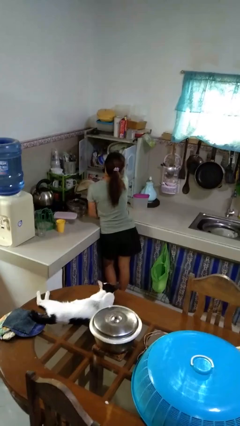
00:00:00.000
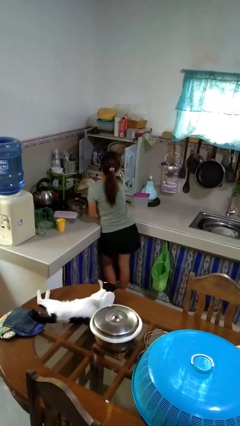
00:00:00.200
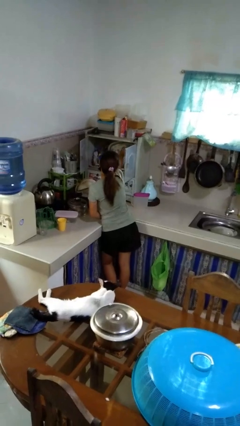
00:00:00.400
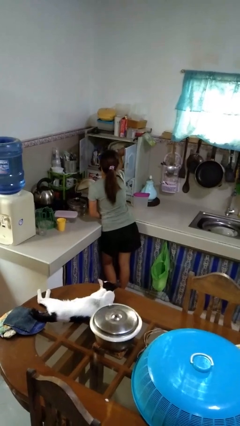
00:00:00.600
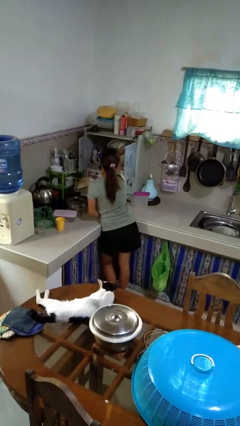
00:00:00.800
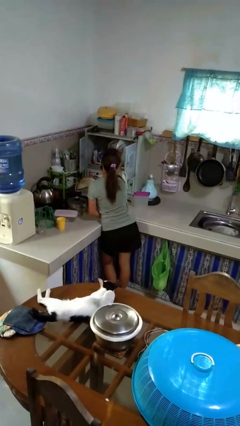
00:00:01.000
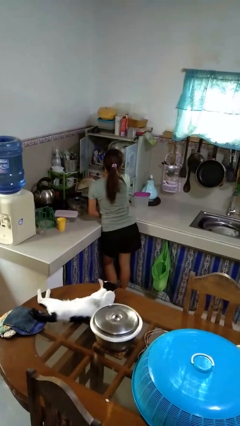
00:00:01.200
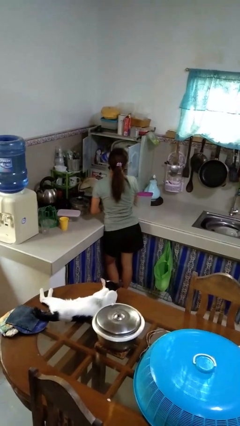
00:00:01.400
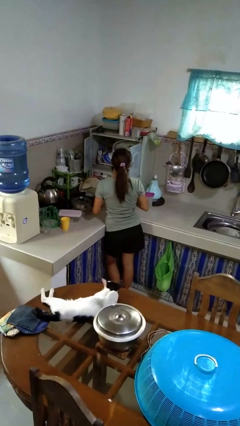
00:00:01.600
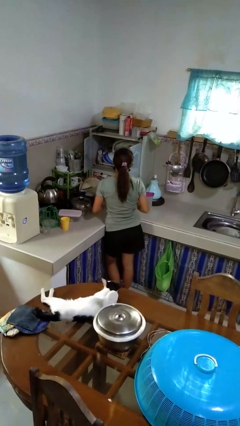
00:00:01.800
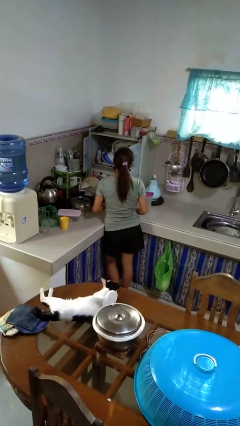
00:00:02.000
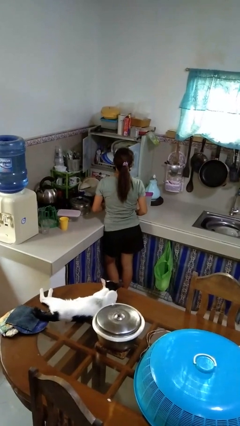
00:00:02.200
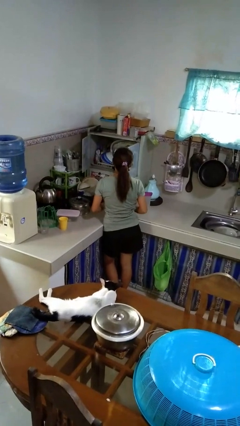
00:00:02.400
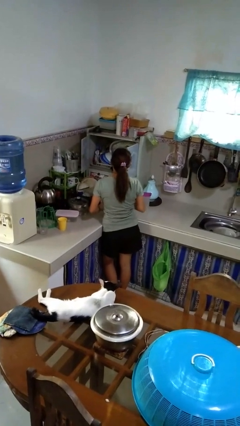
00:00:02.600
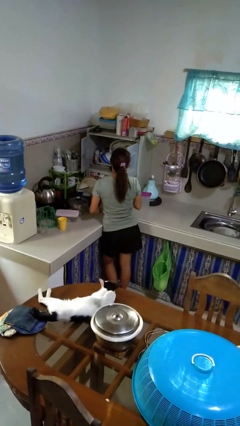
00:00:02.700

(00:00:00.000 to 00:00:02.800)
person takes object from kitchen drawer

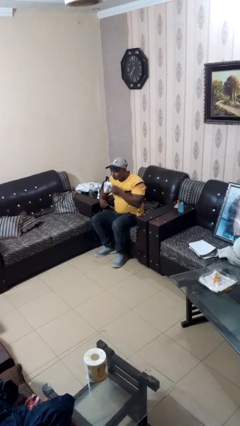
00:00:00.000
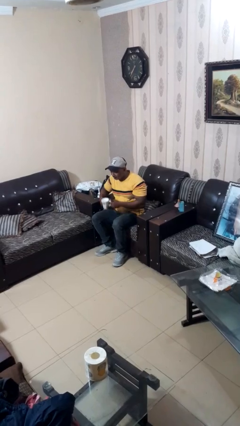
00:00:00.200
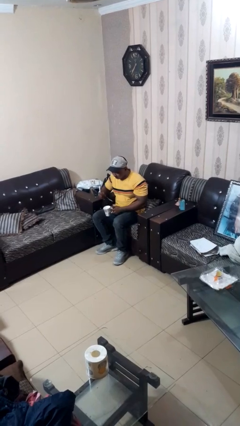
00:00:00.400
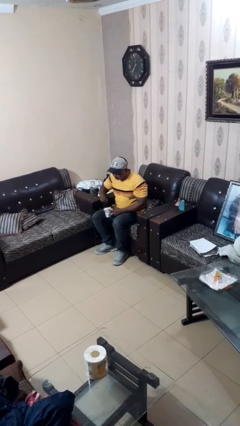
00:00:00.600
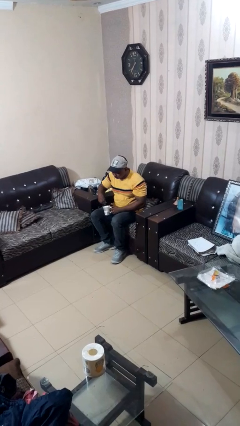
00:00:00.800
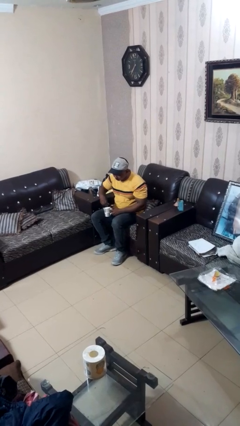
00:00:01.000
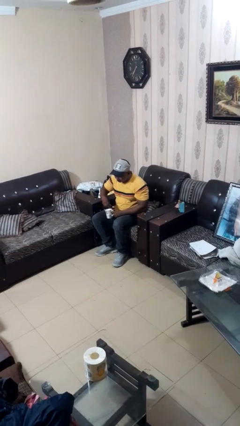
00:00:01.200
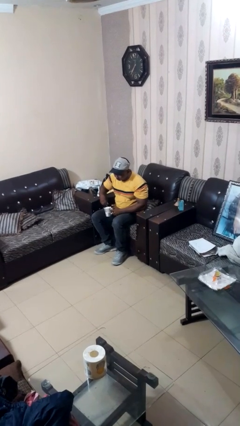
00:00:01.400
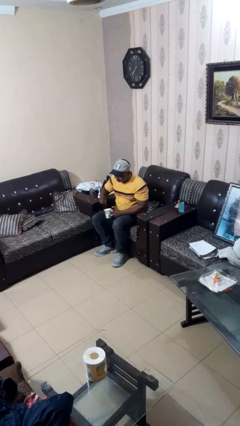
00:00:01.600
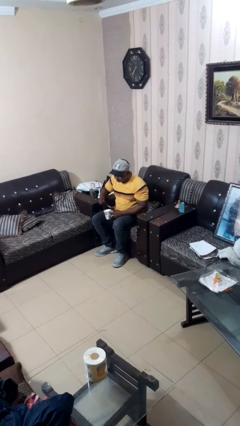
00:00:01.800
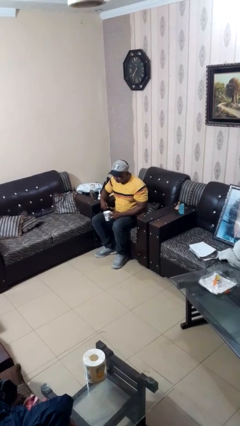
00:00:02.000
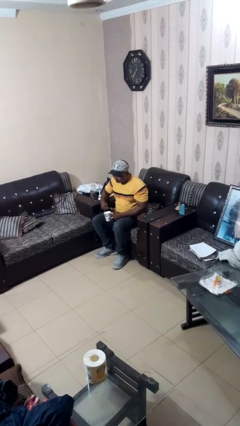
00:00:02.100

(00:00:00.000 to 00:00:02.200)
person stirs mug

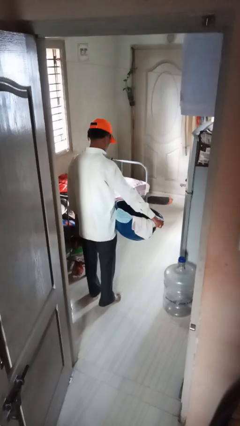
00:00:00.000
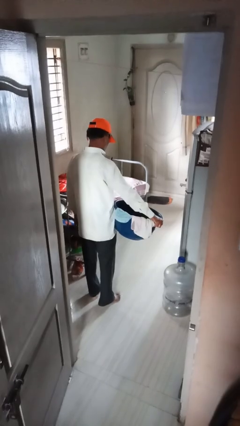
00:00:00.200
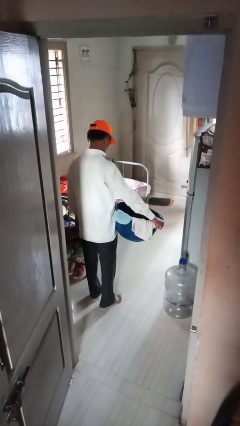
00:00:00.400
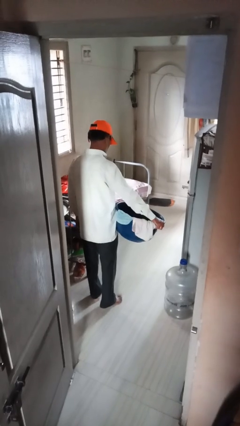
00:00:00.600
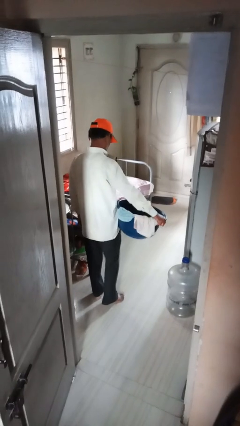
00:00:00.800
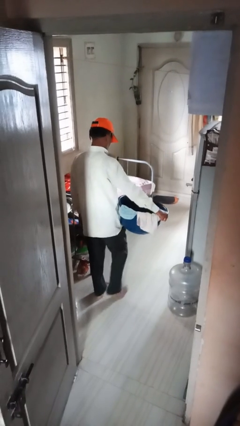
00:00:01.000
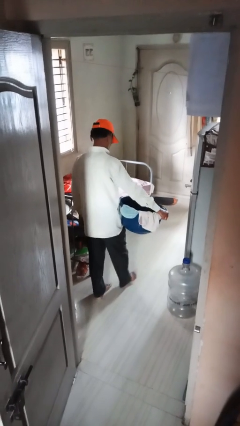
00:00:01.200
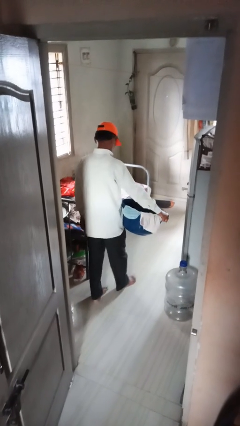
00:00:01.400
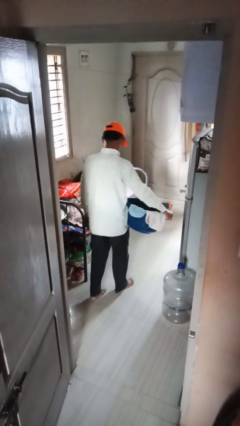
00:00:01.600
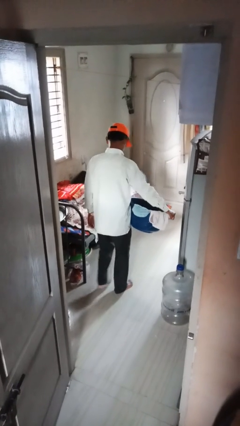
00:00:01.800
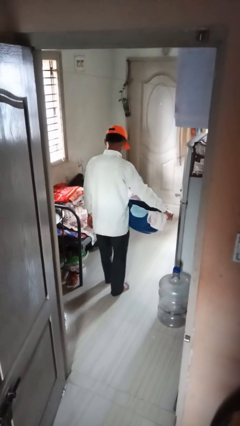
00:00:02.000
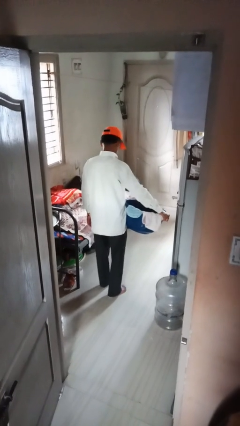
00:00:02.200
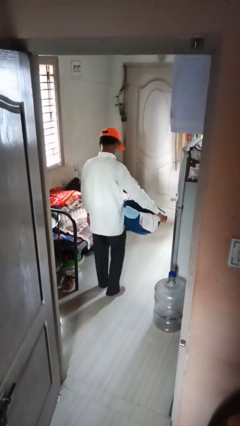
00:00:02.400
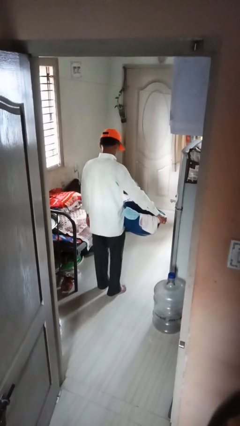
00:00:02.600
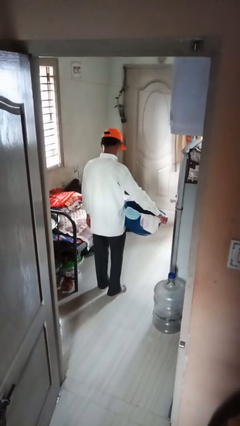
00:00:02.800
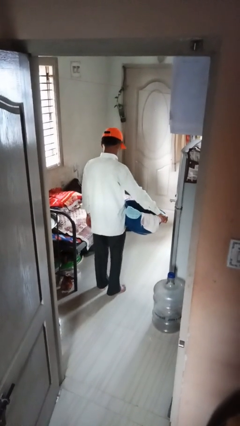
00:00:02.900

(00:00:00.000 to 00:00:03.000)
person carries laundry basket

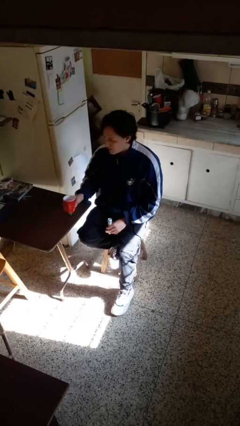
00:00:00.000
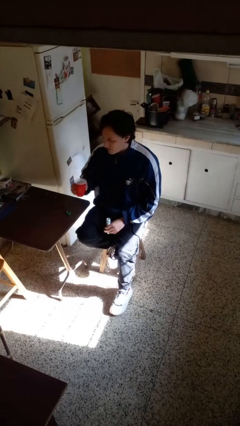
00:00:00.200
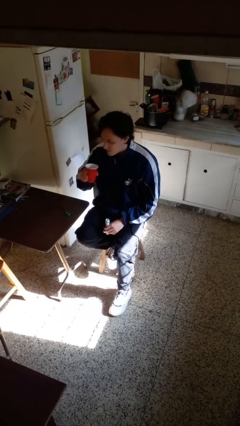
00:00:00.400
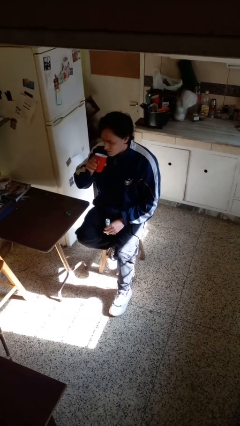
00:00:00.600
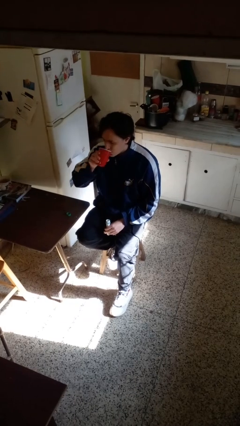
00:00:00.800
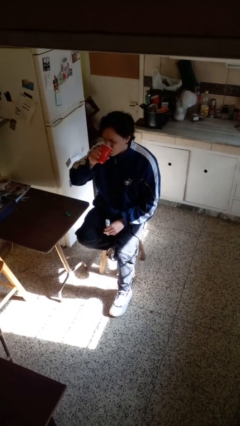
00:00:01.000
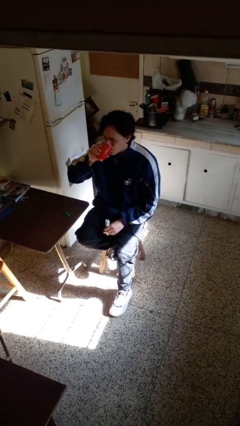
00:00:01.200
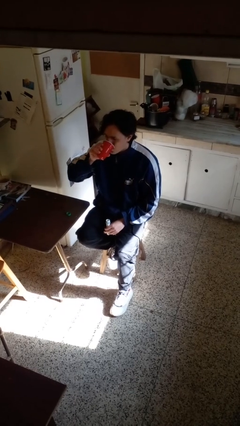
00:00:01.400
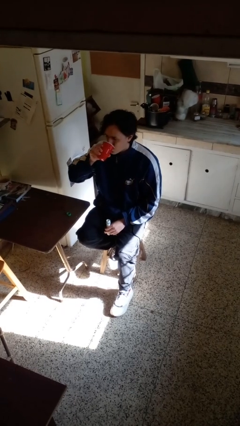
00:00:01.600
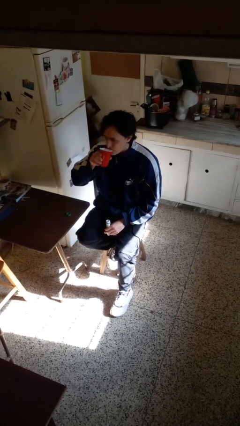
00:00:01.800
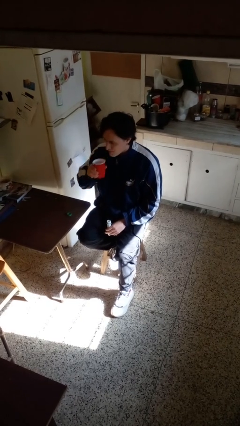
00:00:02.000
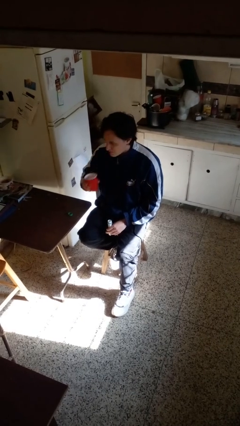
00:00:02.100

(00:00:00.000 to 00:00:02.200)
person drinks from cup

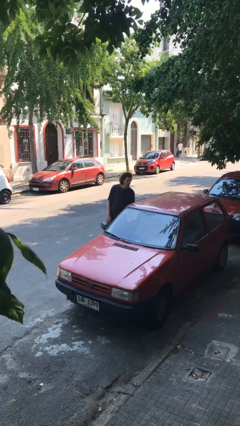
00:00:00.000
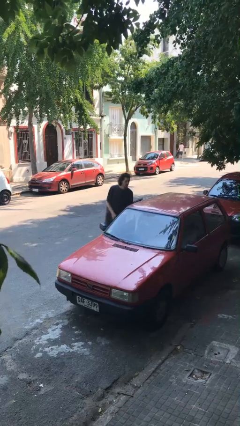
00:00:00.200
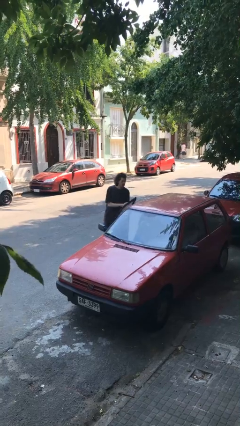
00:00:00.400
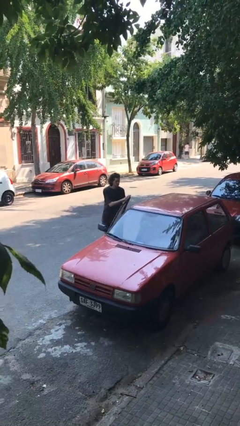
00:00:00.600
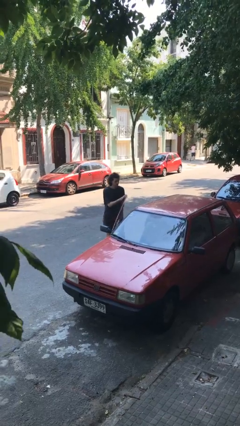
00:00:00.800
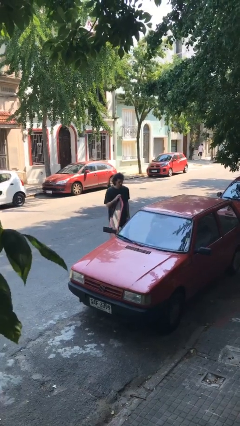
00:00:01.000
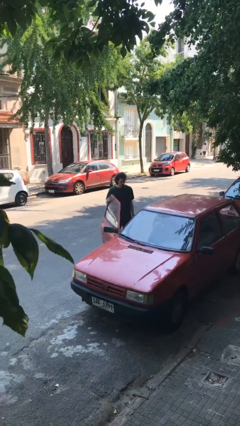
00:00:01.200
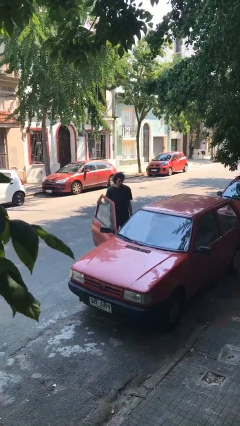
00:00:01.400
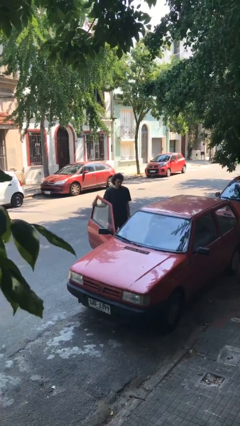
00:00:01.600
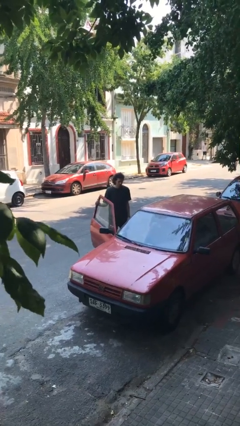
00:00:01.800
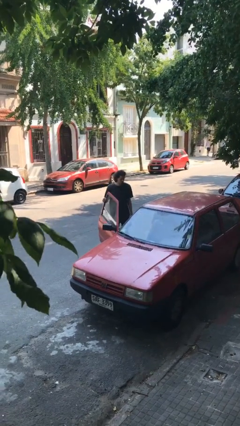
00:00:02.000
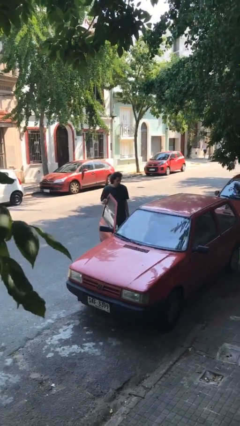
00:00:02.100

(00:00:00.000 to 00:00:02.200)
person opens car door

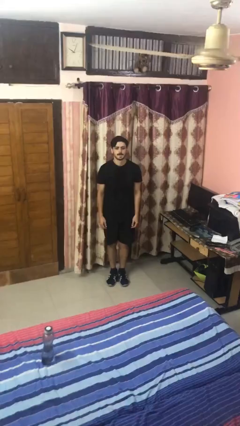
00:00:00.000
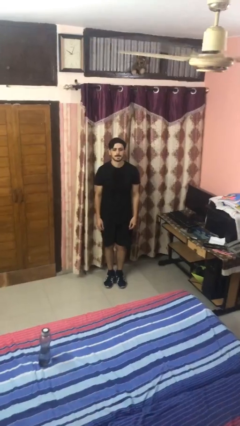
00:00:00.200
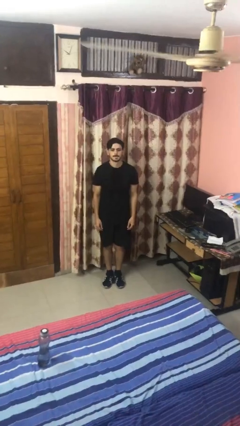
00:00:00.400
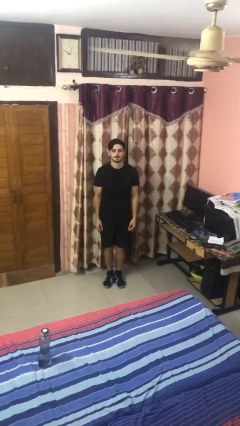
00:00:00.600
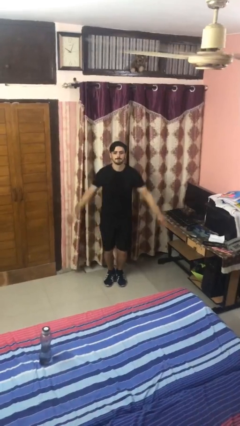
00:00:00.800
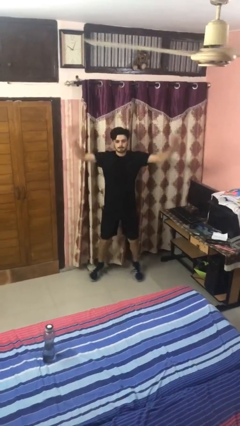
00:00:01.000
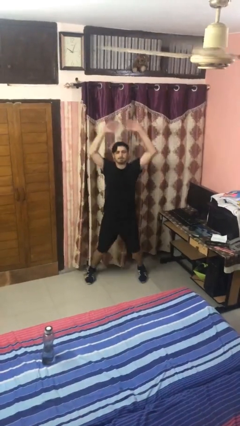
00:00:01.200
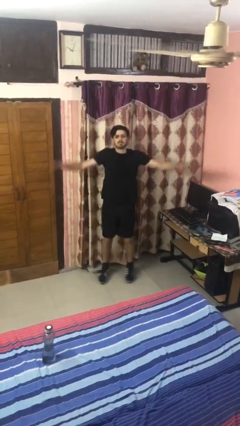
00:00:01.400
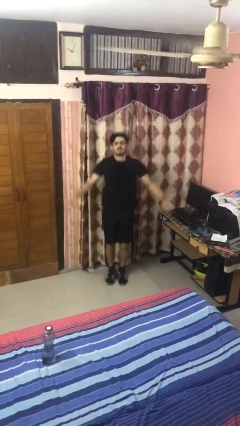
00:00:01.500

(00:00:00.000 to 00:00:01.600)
person exercises with jumping jacks

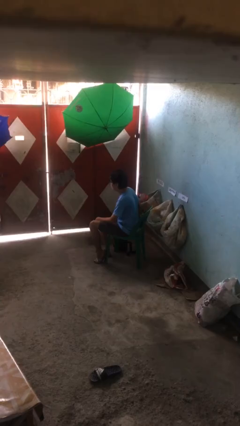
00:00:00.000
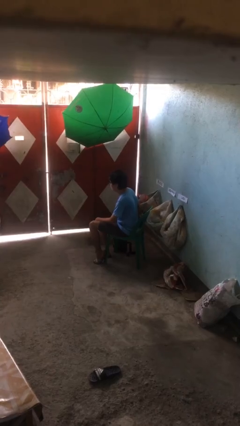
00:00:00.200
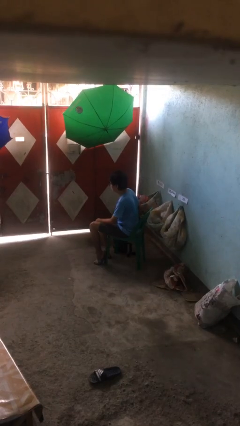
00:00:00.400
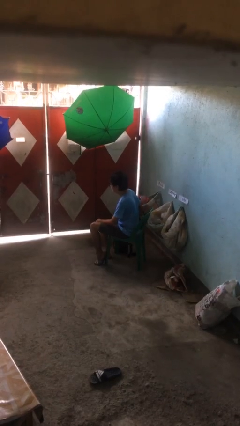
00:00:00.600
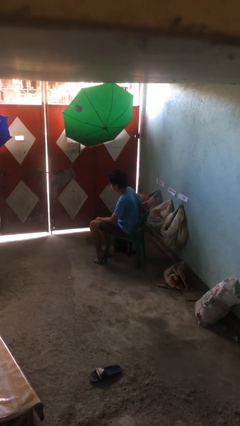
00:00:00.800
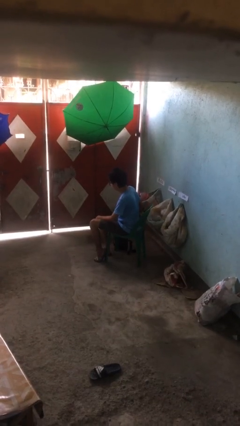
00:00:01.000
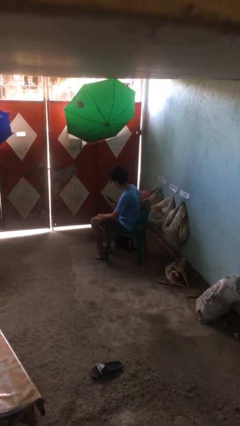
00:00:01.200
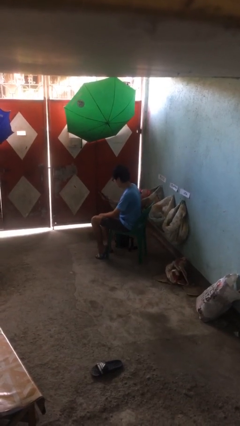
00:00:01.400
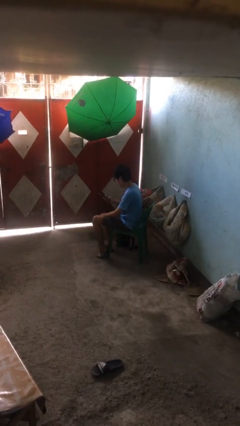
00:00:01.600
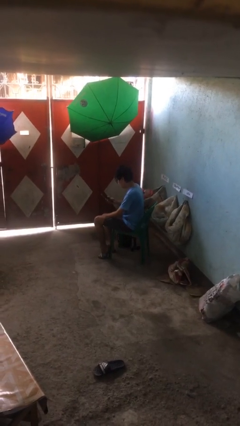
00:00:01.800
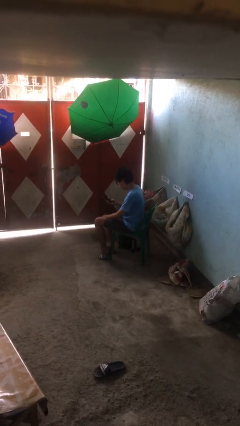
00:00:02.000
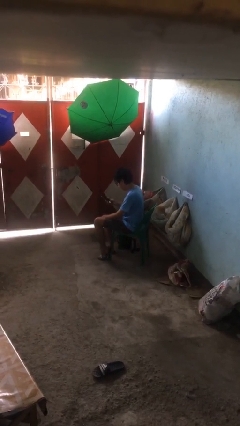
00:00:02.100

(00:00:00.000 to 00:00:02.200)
person takes phone from pocket

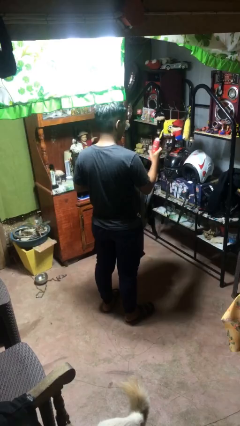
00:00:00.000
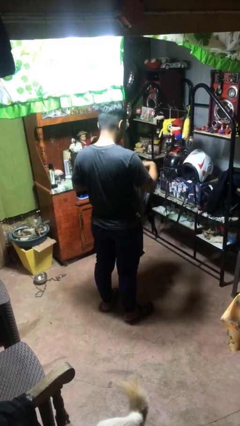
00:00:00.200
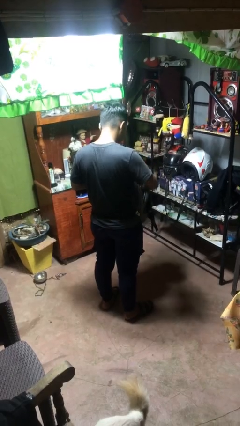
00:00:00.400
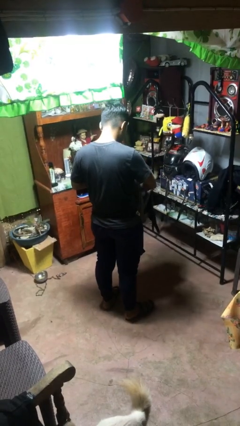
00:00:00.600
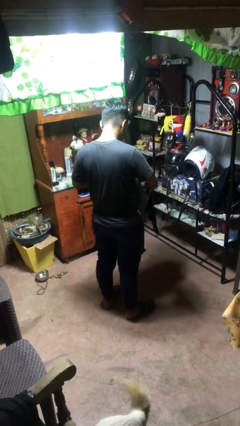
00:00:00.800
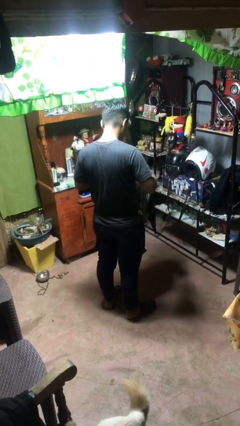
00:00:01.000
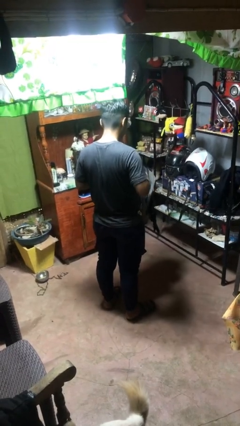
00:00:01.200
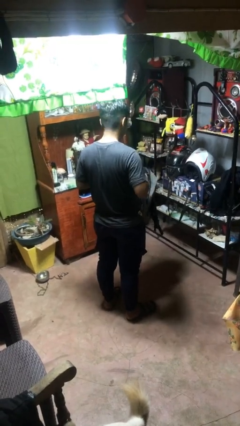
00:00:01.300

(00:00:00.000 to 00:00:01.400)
person puts object into bag
